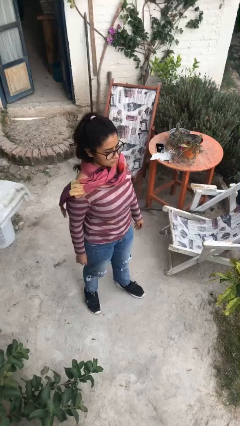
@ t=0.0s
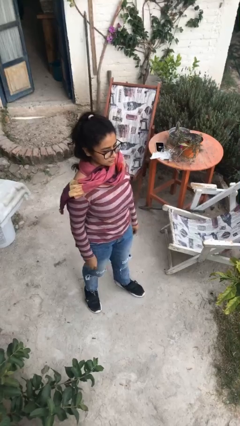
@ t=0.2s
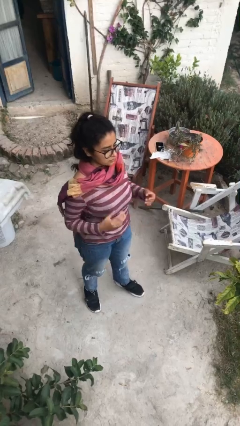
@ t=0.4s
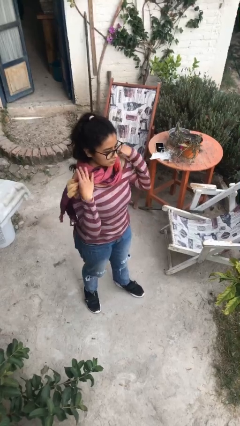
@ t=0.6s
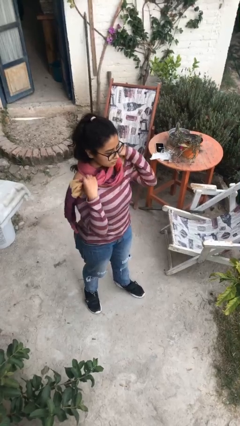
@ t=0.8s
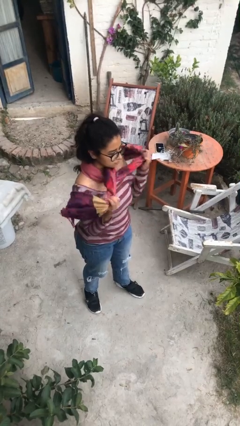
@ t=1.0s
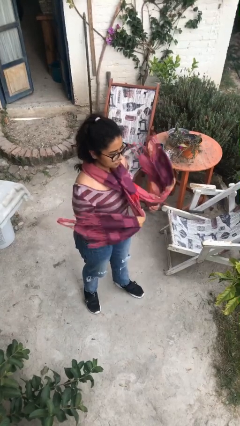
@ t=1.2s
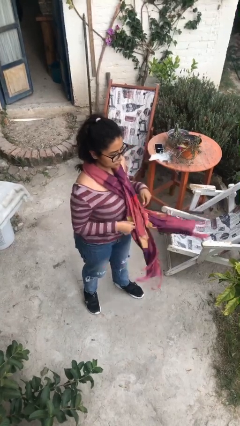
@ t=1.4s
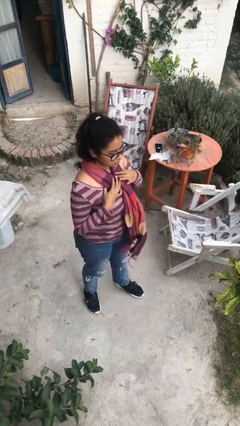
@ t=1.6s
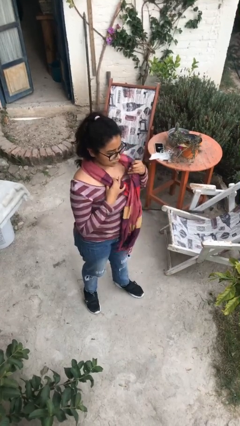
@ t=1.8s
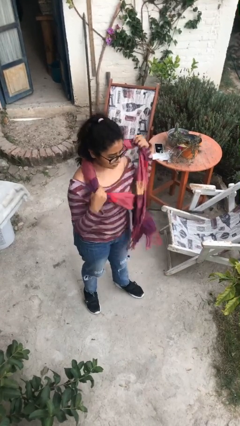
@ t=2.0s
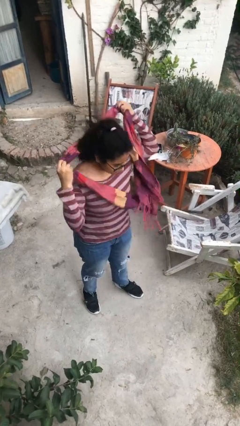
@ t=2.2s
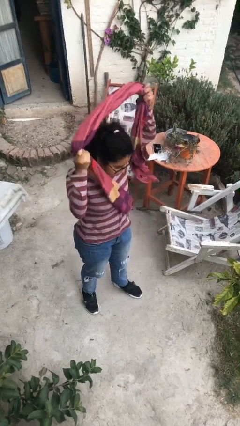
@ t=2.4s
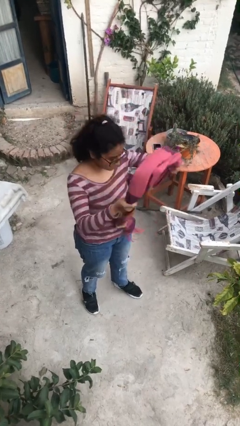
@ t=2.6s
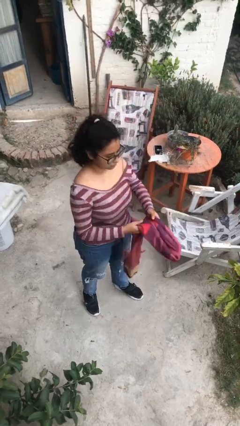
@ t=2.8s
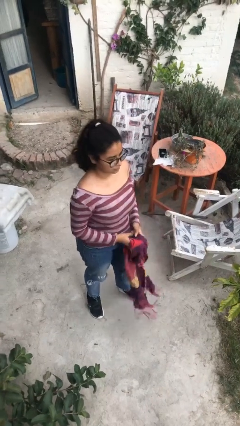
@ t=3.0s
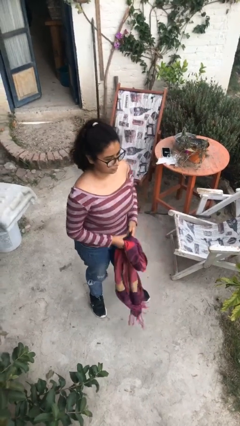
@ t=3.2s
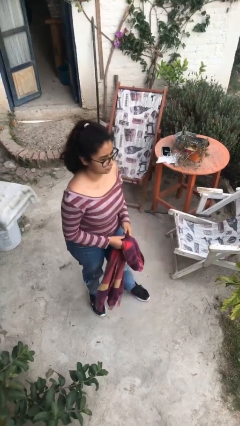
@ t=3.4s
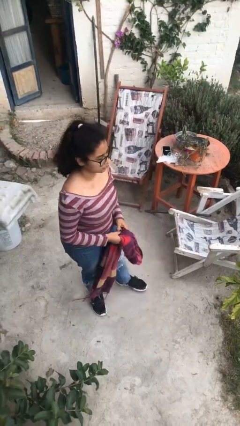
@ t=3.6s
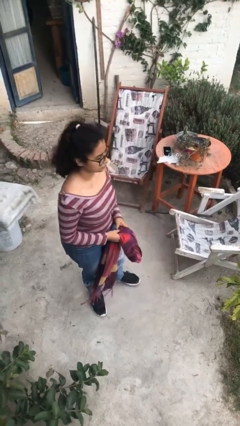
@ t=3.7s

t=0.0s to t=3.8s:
person takes off scarf

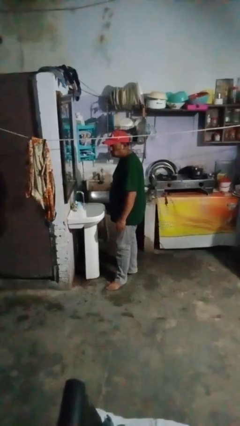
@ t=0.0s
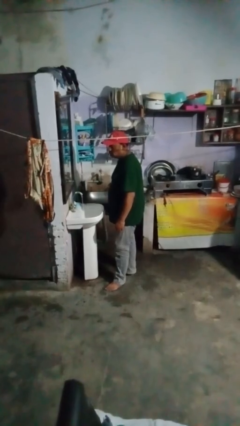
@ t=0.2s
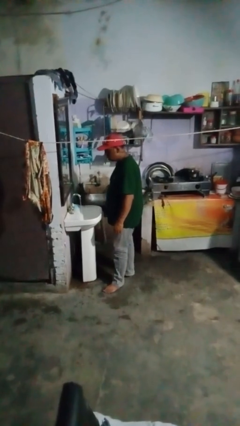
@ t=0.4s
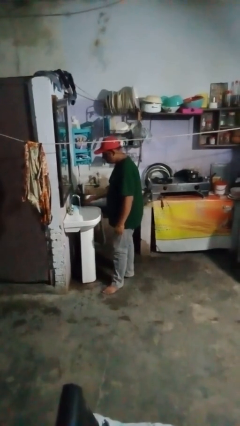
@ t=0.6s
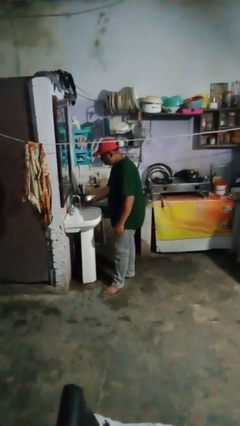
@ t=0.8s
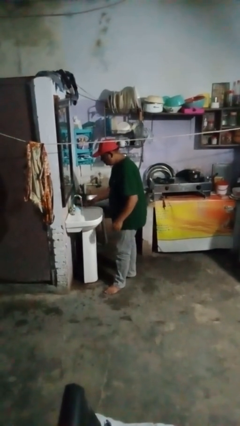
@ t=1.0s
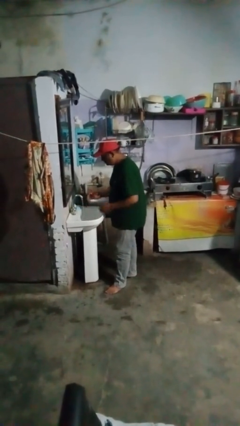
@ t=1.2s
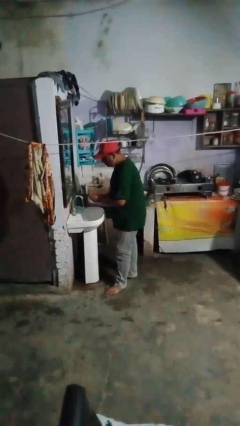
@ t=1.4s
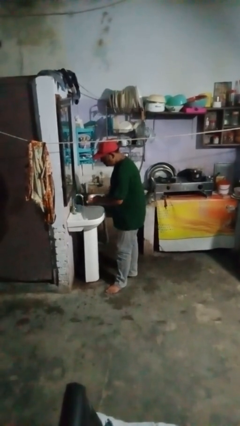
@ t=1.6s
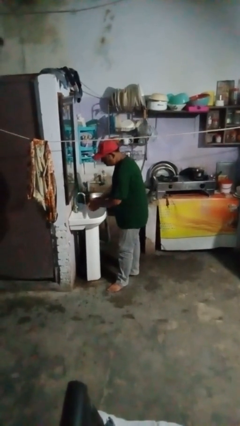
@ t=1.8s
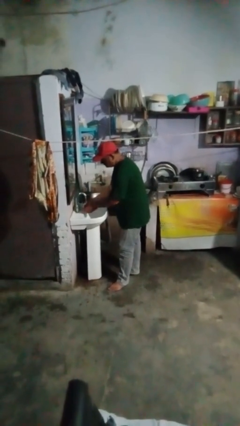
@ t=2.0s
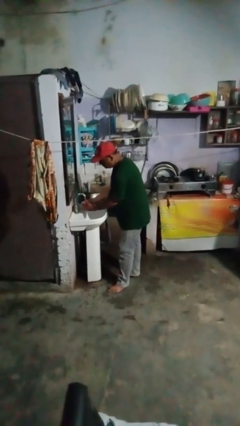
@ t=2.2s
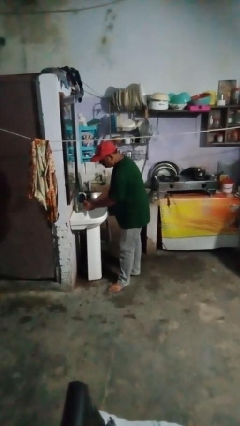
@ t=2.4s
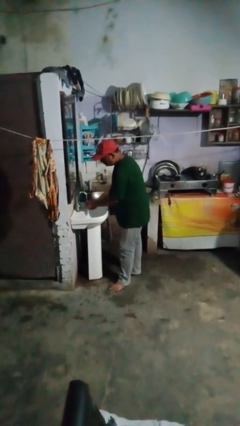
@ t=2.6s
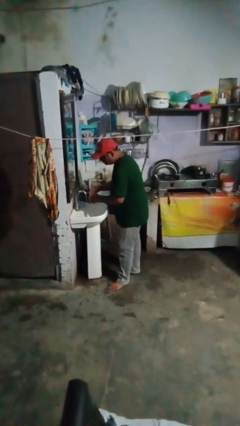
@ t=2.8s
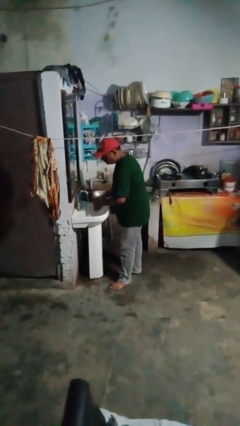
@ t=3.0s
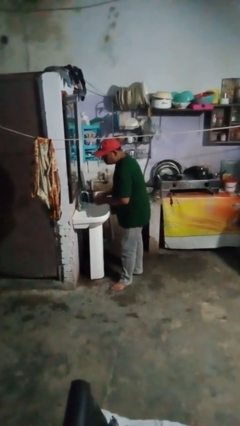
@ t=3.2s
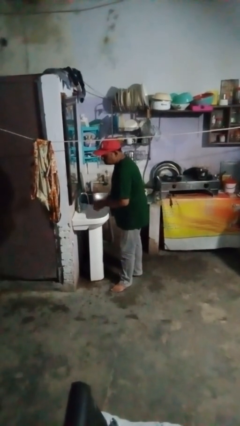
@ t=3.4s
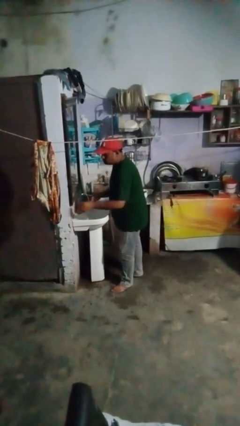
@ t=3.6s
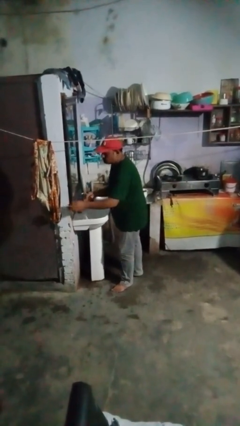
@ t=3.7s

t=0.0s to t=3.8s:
person washes hands

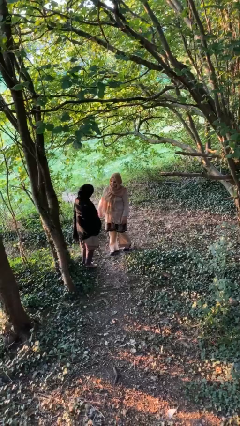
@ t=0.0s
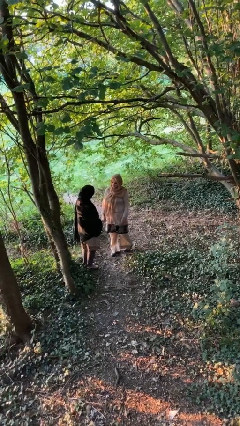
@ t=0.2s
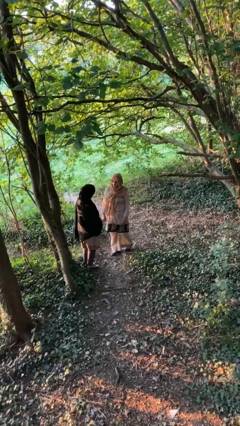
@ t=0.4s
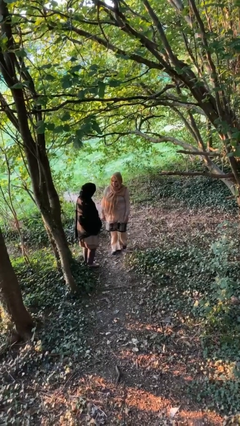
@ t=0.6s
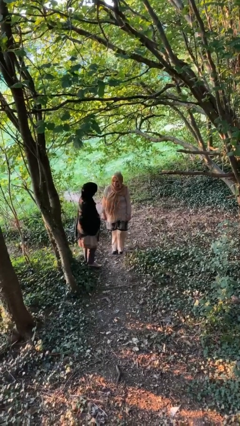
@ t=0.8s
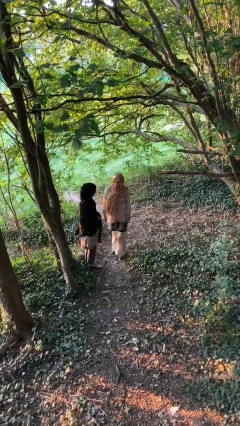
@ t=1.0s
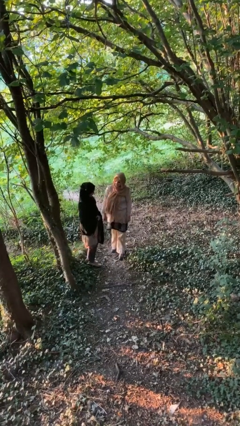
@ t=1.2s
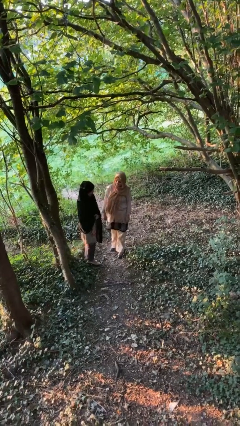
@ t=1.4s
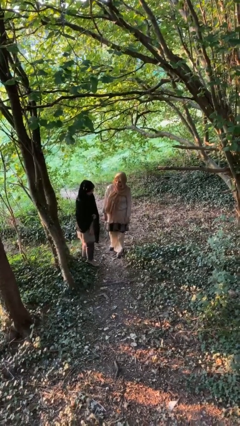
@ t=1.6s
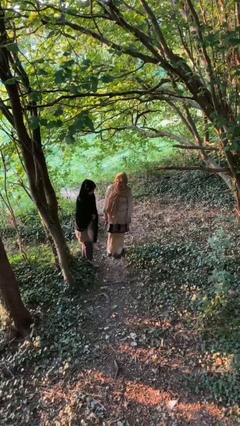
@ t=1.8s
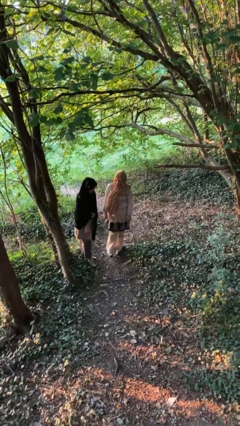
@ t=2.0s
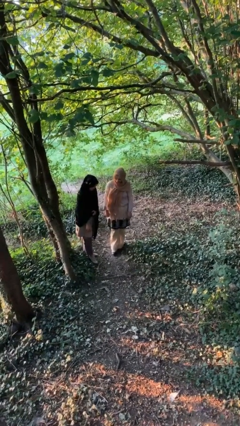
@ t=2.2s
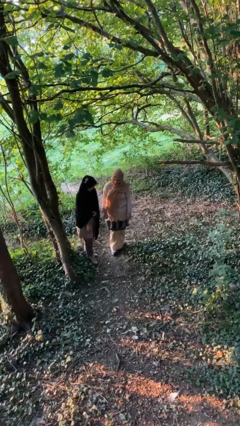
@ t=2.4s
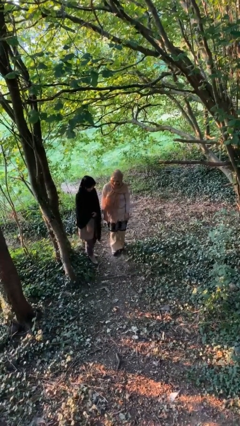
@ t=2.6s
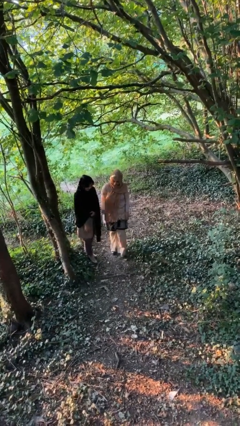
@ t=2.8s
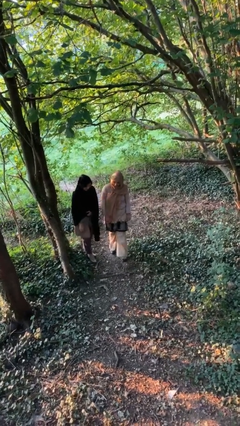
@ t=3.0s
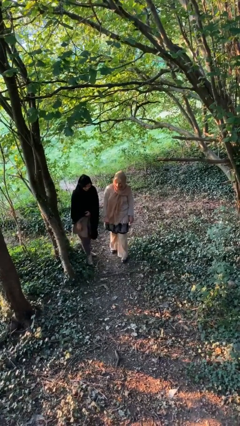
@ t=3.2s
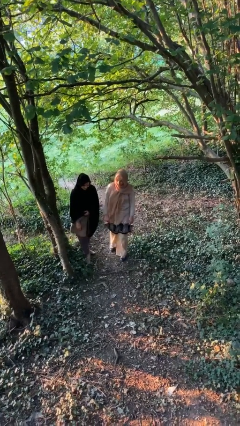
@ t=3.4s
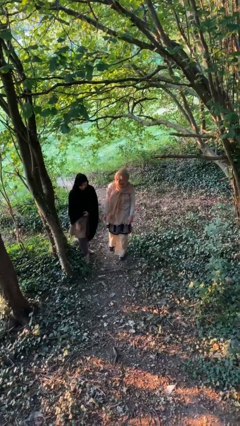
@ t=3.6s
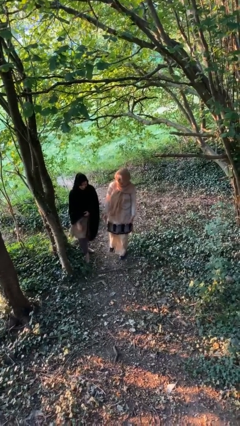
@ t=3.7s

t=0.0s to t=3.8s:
person talks to person

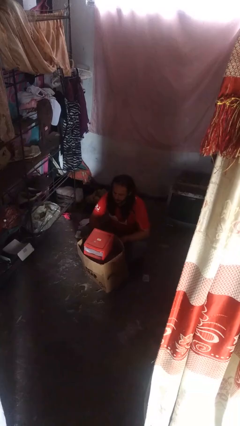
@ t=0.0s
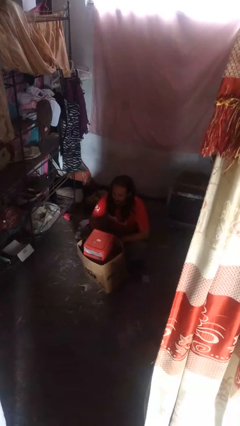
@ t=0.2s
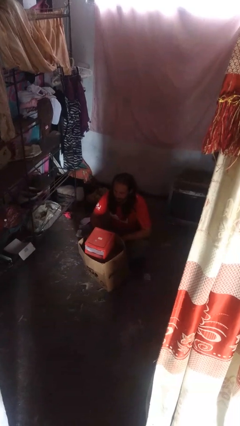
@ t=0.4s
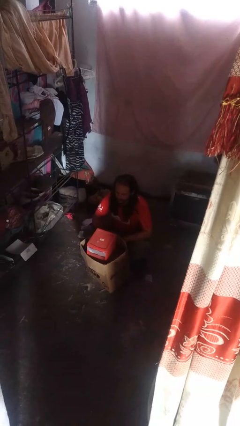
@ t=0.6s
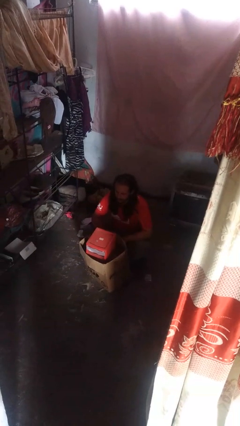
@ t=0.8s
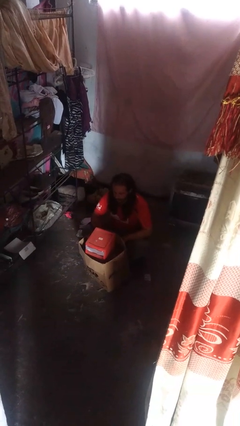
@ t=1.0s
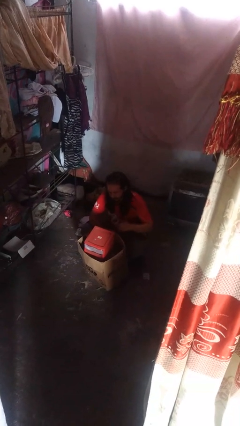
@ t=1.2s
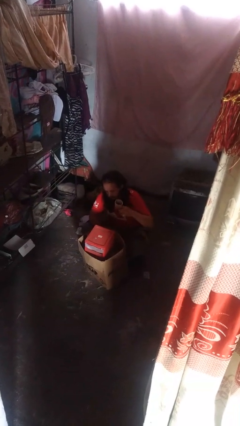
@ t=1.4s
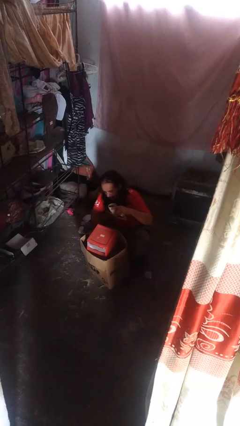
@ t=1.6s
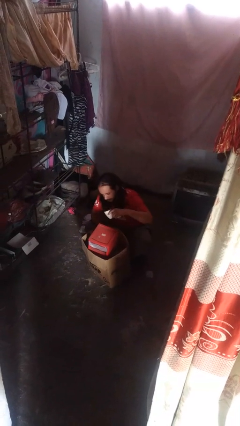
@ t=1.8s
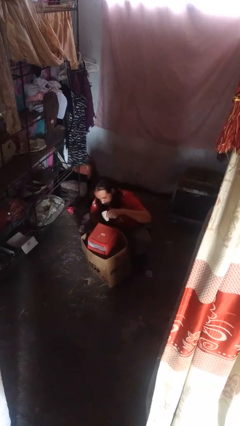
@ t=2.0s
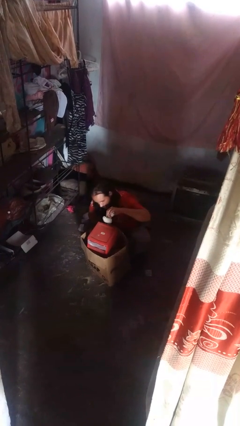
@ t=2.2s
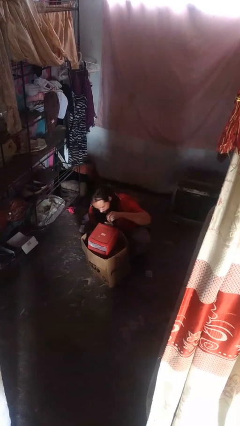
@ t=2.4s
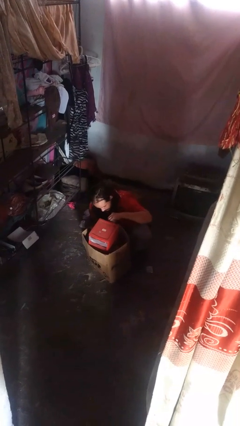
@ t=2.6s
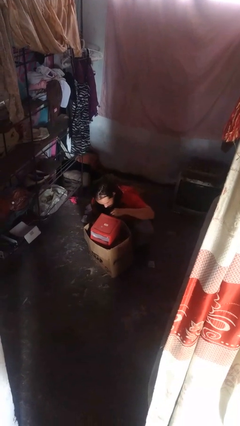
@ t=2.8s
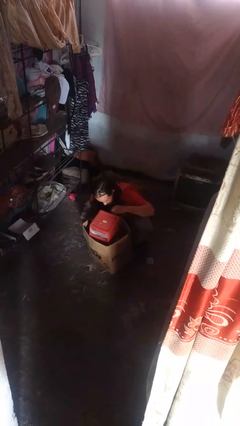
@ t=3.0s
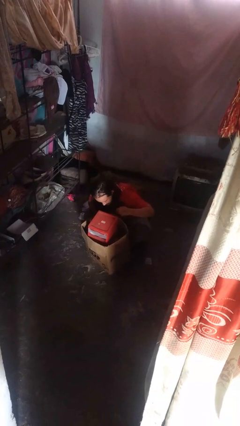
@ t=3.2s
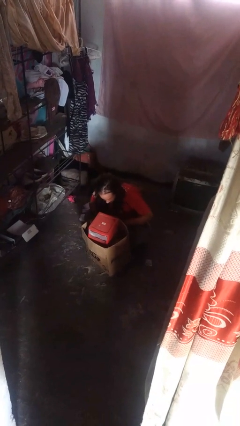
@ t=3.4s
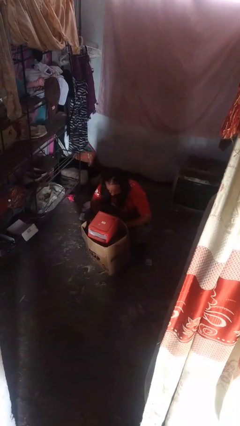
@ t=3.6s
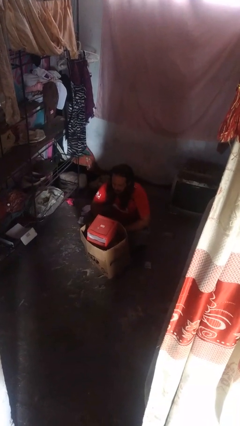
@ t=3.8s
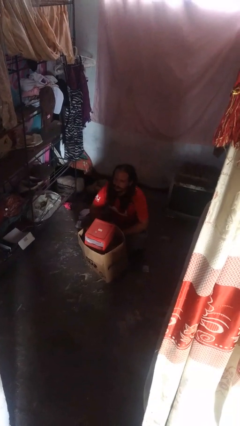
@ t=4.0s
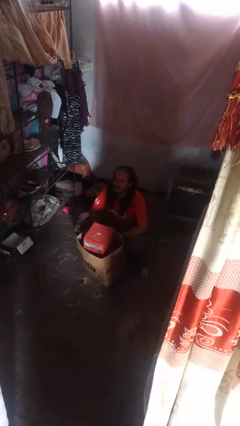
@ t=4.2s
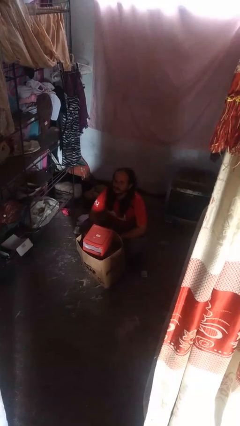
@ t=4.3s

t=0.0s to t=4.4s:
person puts object into box

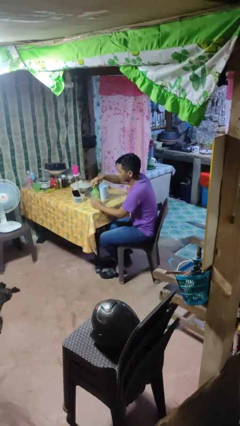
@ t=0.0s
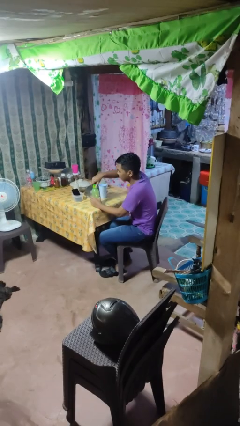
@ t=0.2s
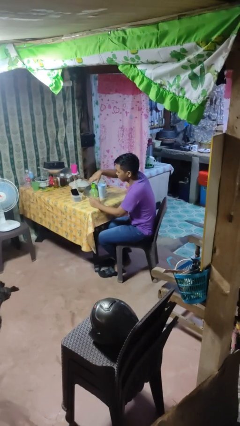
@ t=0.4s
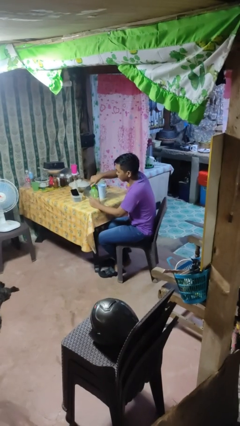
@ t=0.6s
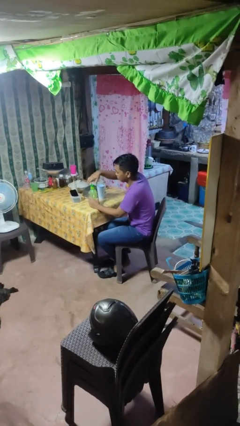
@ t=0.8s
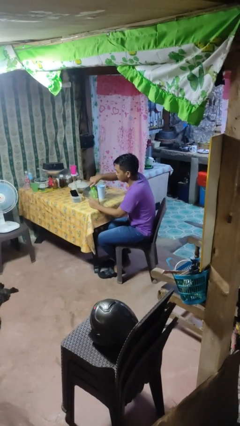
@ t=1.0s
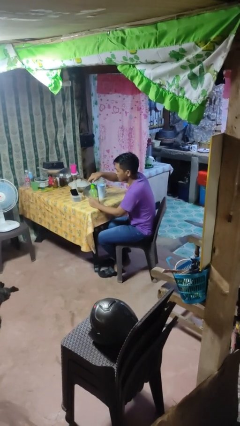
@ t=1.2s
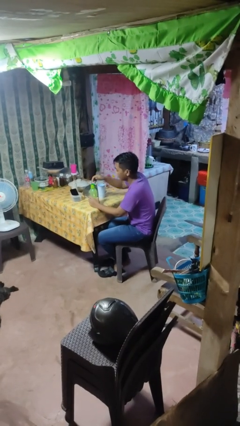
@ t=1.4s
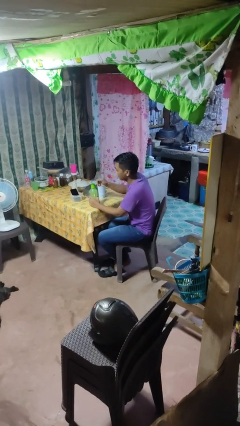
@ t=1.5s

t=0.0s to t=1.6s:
person screws lid to bottle
